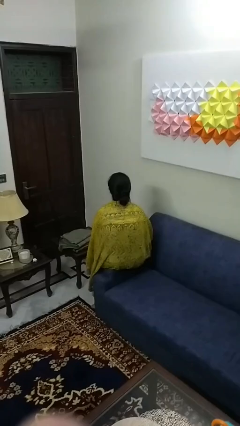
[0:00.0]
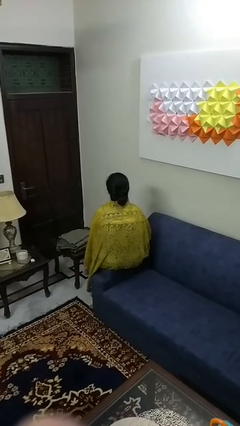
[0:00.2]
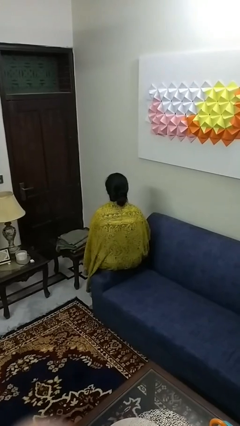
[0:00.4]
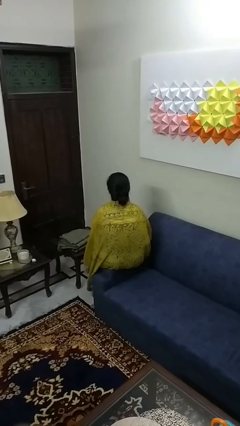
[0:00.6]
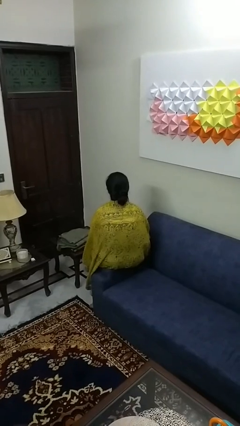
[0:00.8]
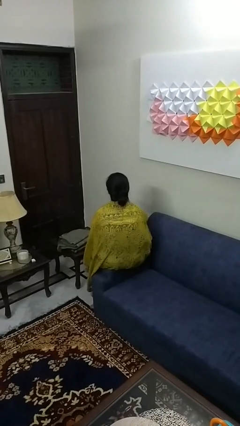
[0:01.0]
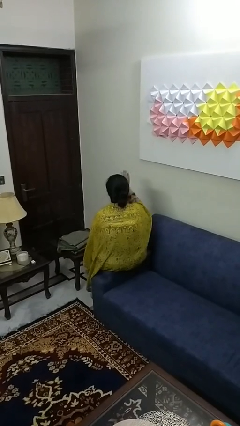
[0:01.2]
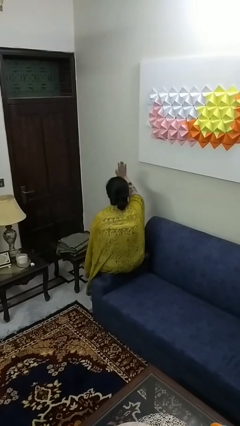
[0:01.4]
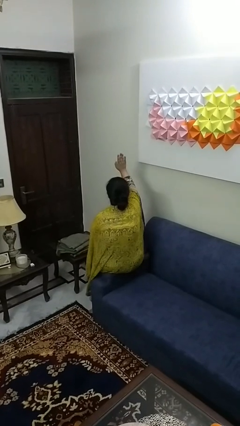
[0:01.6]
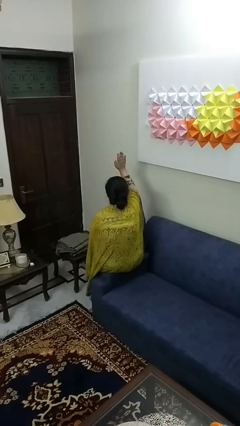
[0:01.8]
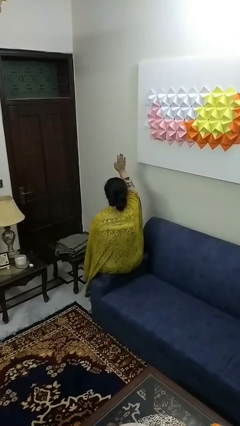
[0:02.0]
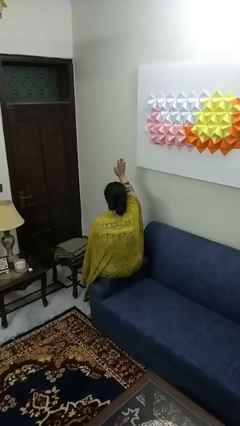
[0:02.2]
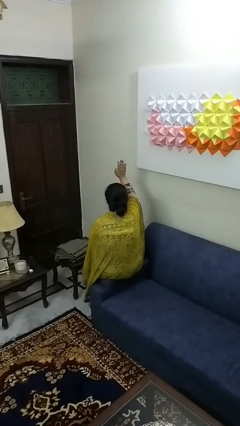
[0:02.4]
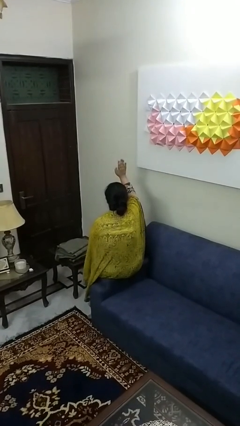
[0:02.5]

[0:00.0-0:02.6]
person gestures raise hand

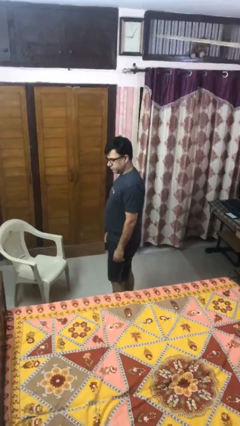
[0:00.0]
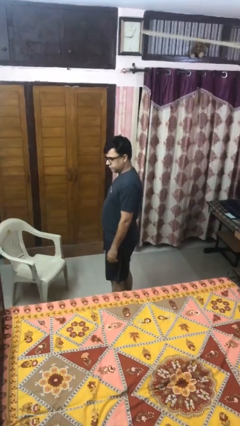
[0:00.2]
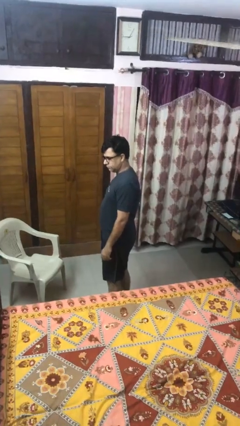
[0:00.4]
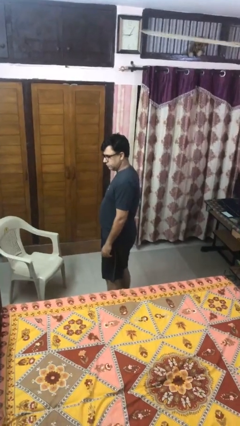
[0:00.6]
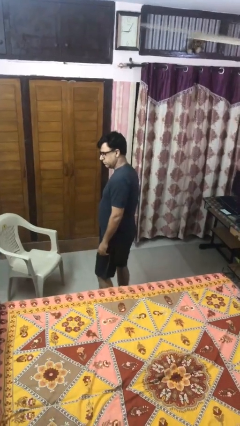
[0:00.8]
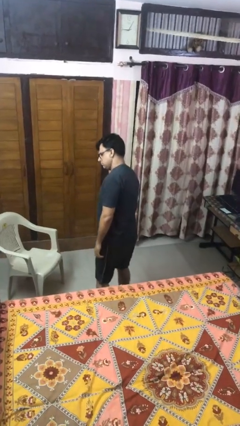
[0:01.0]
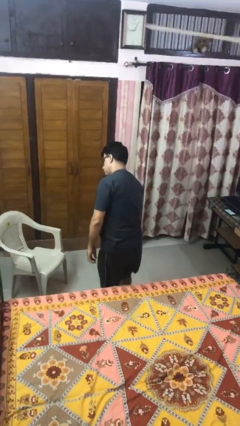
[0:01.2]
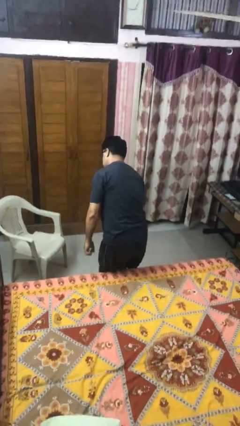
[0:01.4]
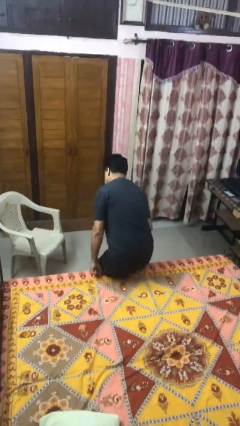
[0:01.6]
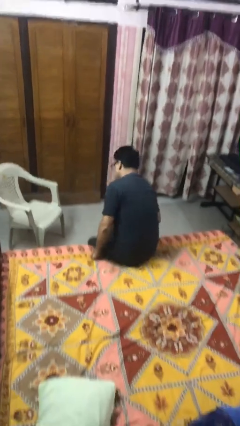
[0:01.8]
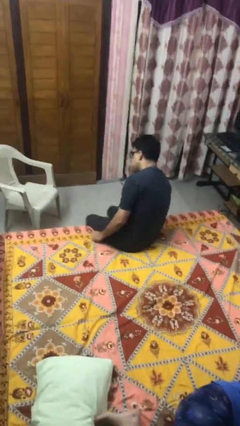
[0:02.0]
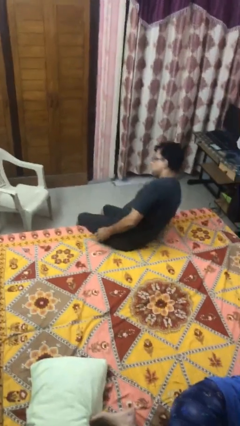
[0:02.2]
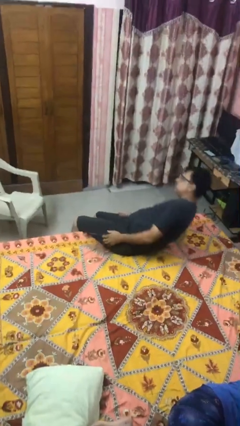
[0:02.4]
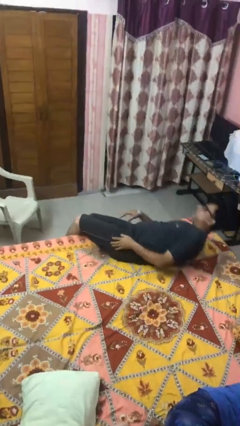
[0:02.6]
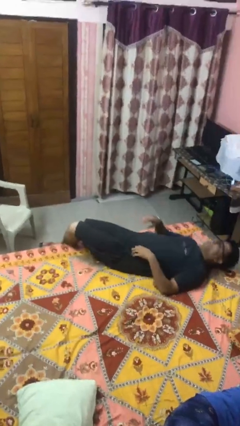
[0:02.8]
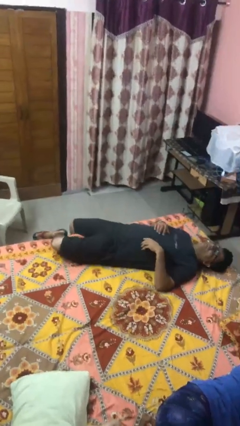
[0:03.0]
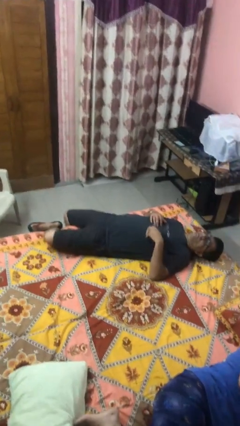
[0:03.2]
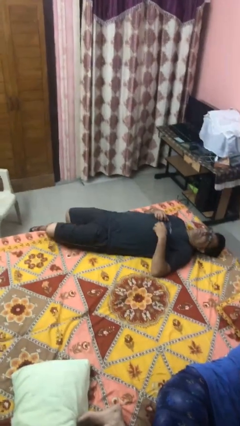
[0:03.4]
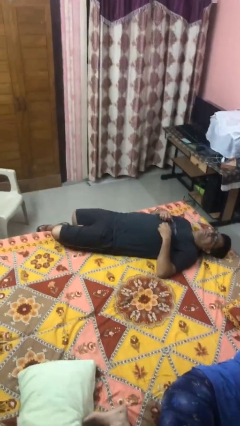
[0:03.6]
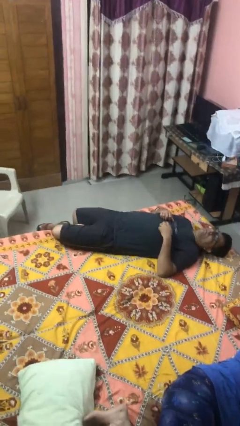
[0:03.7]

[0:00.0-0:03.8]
person lies down on bed

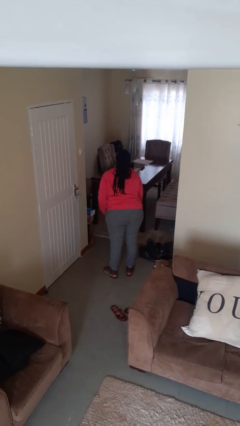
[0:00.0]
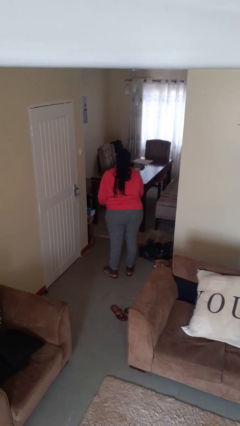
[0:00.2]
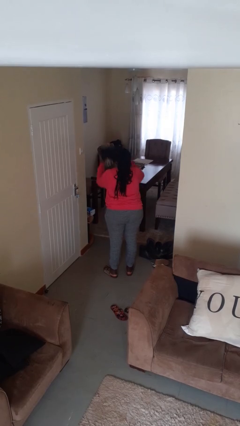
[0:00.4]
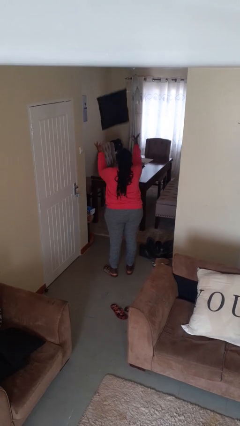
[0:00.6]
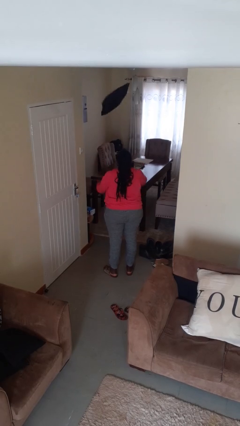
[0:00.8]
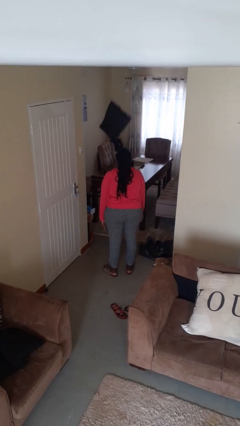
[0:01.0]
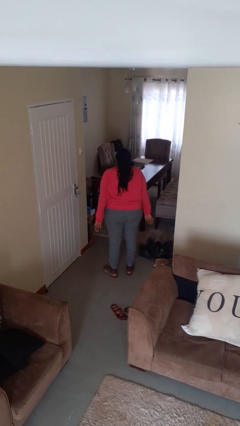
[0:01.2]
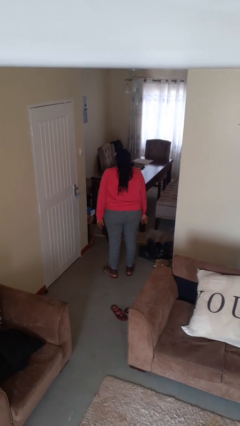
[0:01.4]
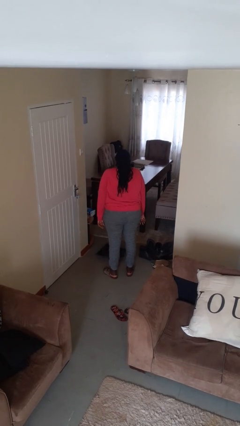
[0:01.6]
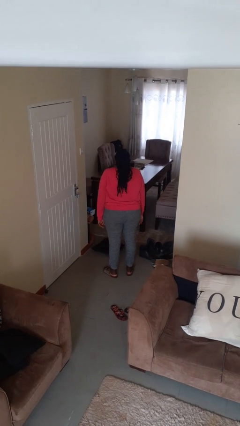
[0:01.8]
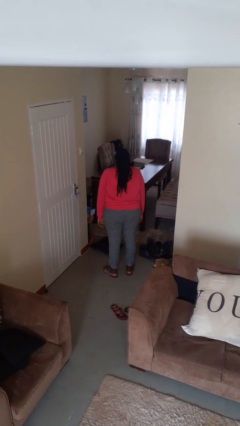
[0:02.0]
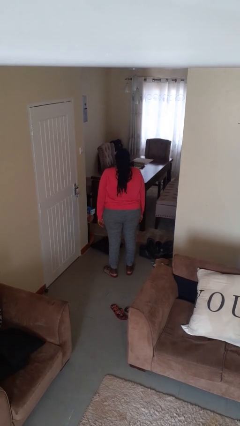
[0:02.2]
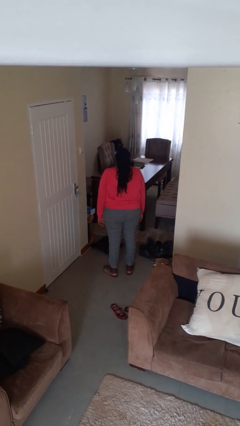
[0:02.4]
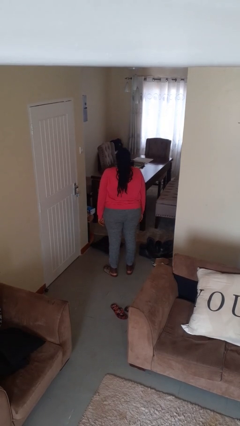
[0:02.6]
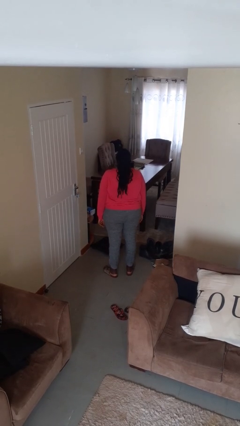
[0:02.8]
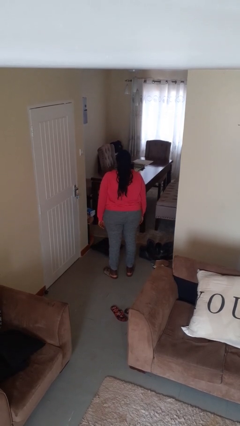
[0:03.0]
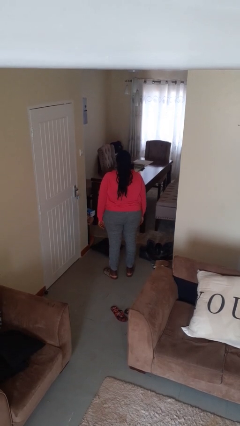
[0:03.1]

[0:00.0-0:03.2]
person throws object into air

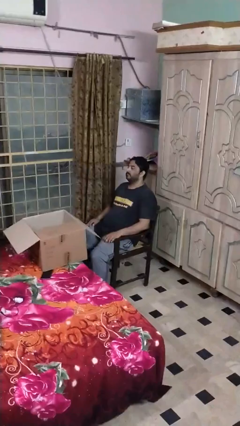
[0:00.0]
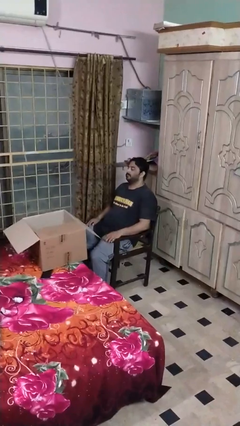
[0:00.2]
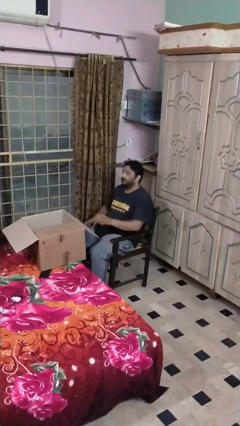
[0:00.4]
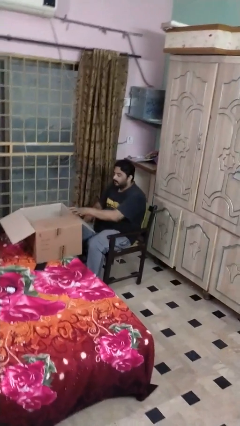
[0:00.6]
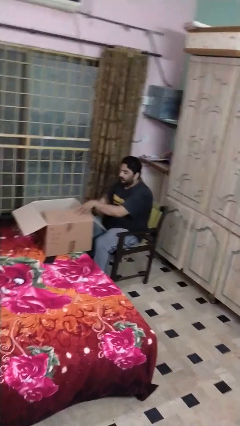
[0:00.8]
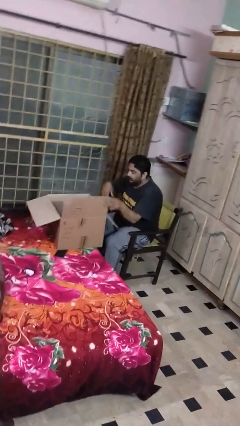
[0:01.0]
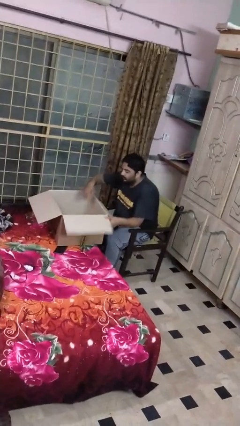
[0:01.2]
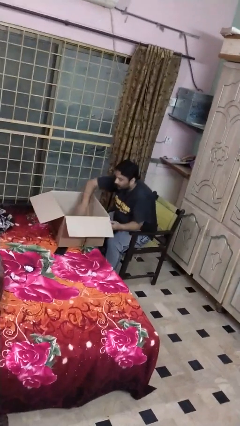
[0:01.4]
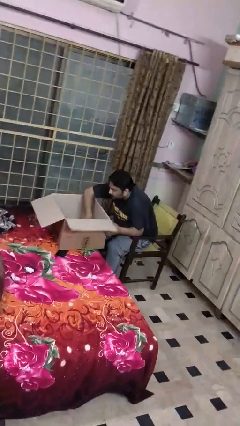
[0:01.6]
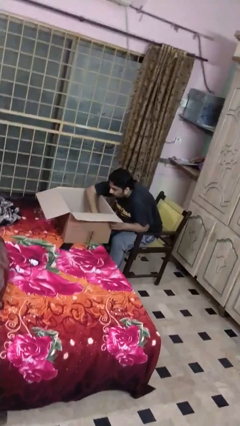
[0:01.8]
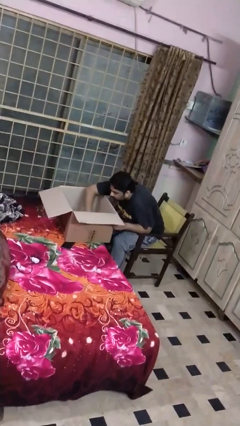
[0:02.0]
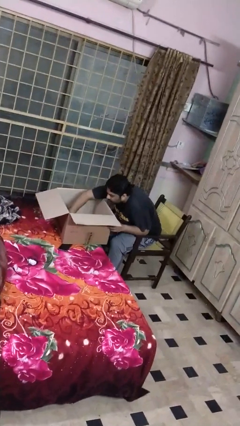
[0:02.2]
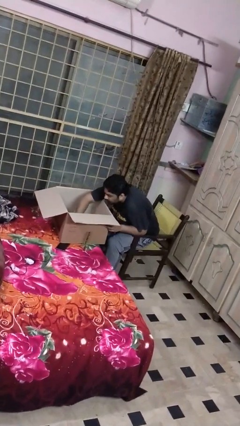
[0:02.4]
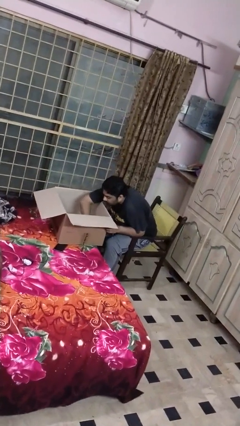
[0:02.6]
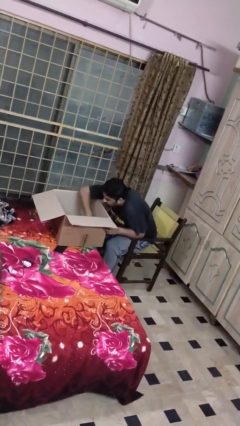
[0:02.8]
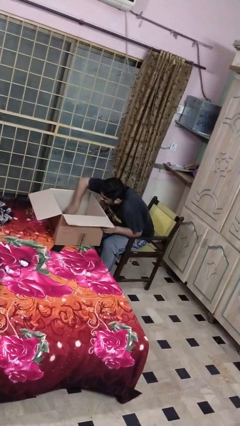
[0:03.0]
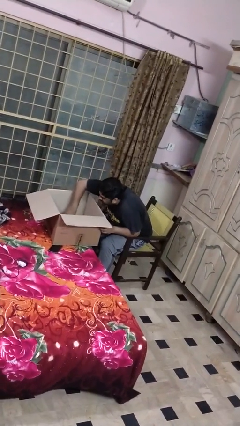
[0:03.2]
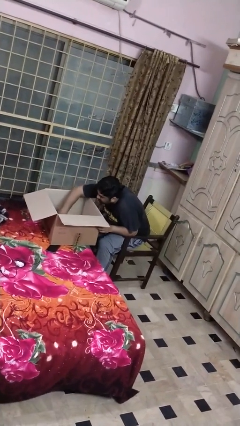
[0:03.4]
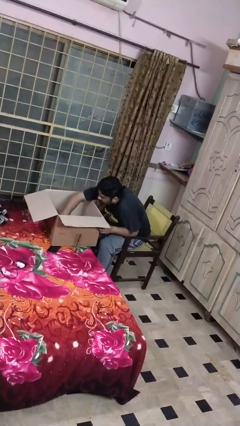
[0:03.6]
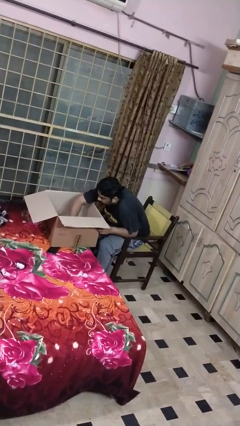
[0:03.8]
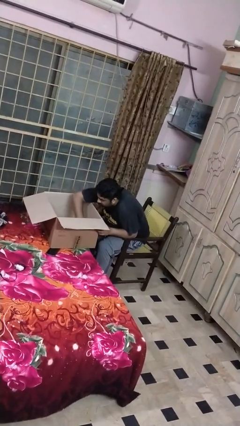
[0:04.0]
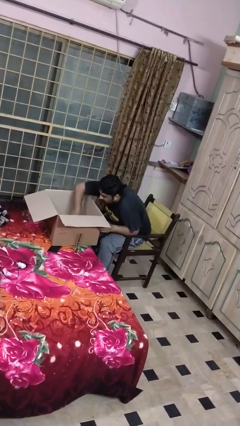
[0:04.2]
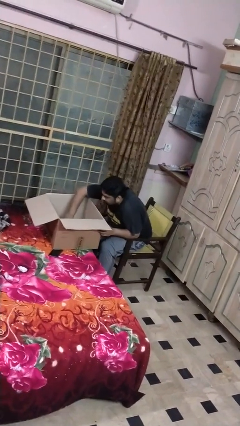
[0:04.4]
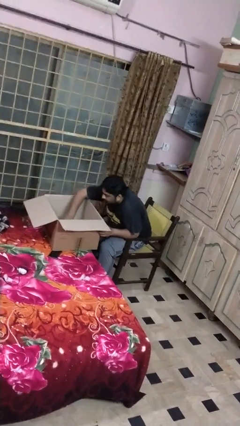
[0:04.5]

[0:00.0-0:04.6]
person searches in box

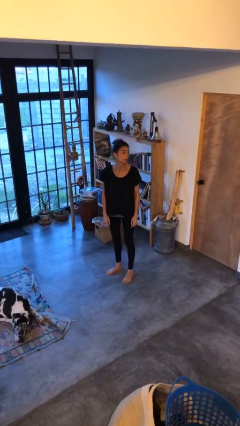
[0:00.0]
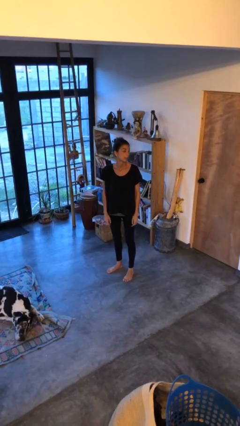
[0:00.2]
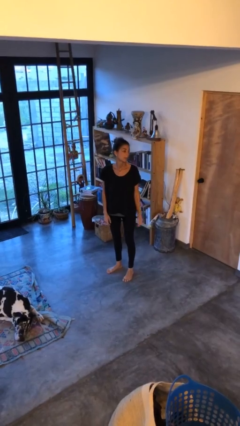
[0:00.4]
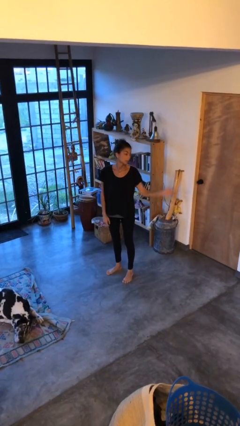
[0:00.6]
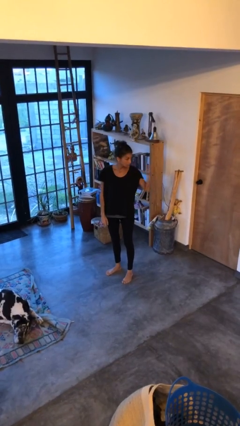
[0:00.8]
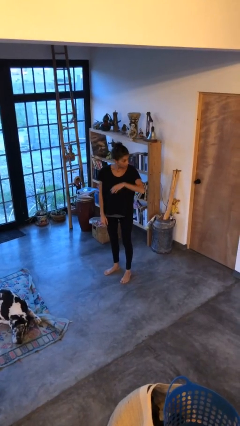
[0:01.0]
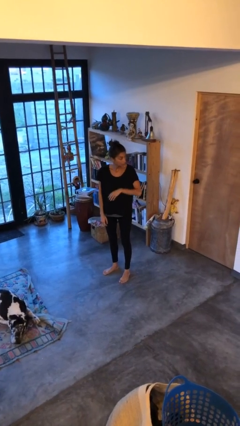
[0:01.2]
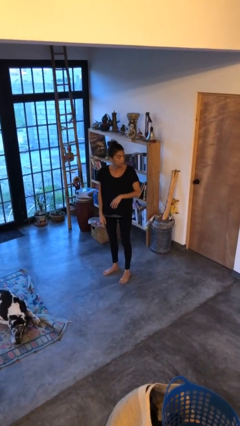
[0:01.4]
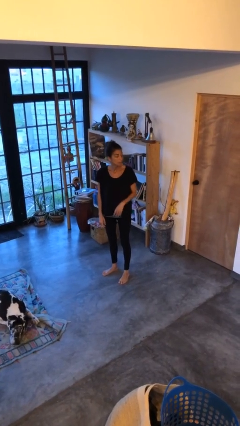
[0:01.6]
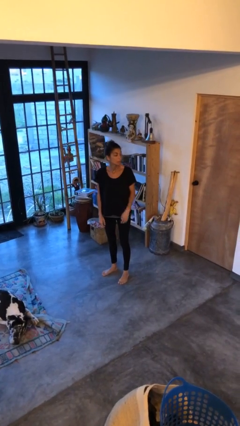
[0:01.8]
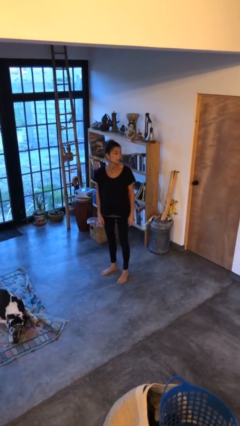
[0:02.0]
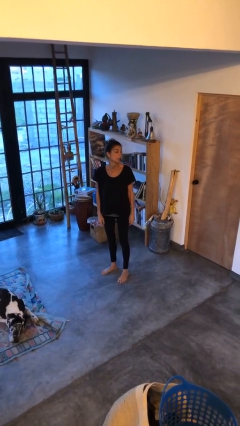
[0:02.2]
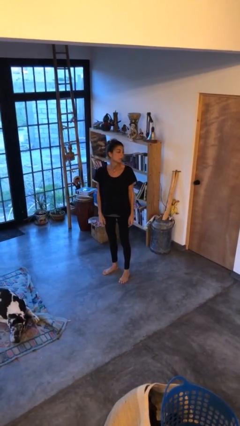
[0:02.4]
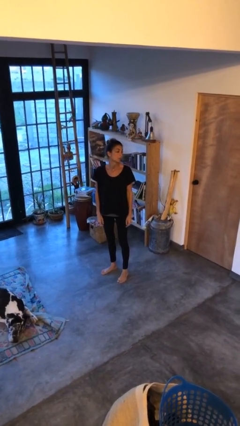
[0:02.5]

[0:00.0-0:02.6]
person gestures come here

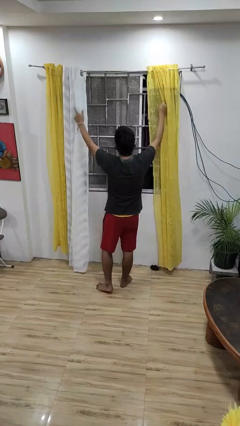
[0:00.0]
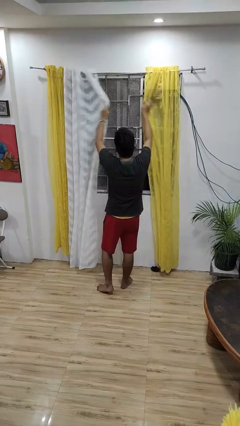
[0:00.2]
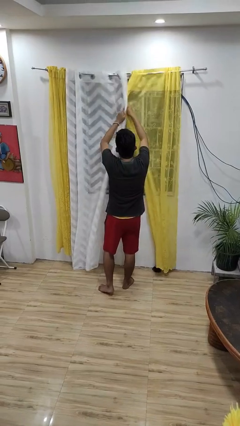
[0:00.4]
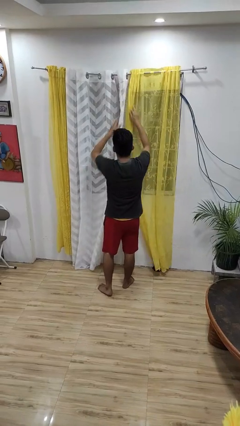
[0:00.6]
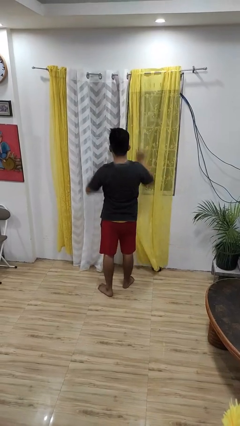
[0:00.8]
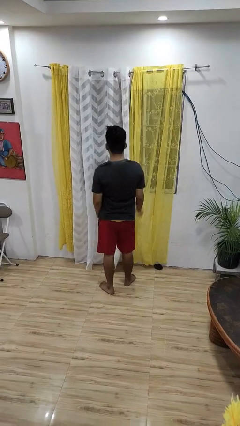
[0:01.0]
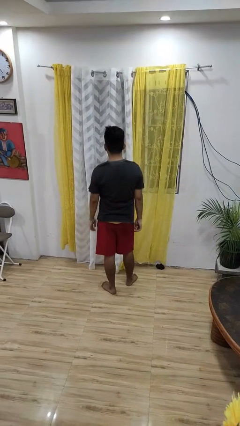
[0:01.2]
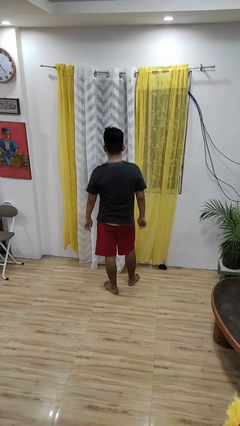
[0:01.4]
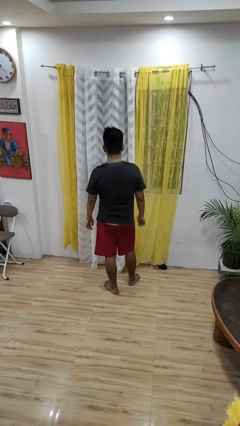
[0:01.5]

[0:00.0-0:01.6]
person closes curtains
